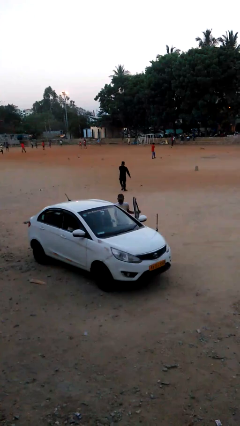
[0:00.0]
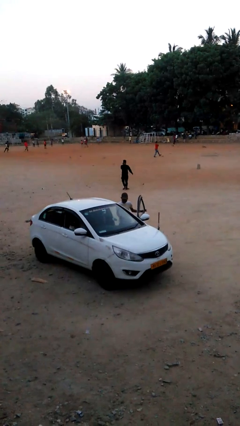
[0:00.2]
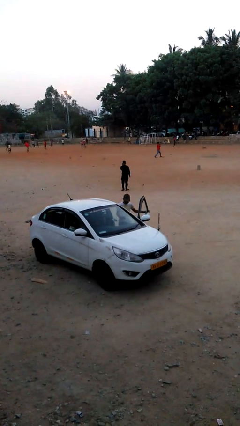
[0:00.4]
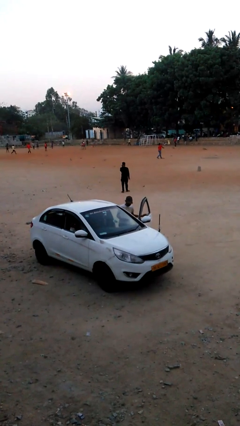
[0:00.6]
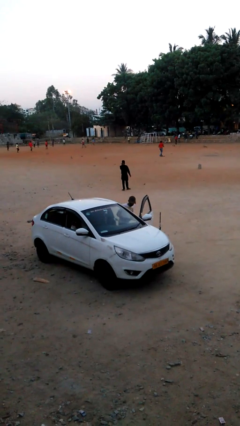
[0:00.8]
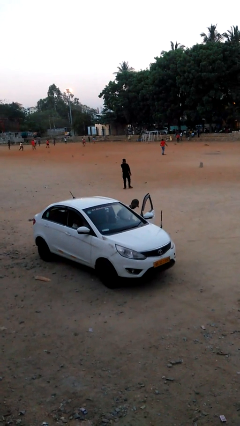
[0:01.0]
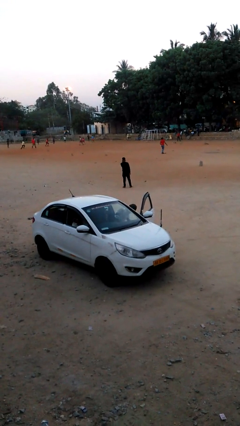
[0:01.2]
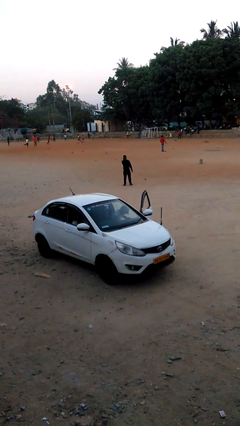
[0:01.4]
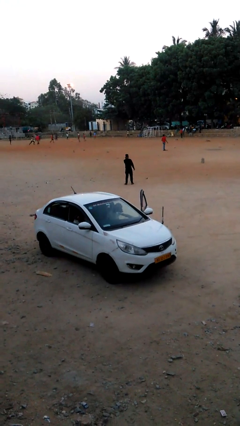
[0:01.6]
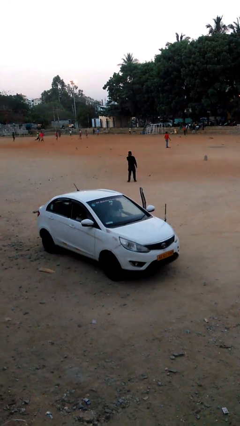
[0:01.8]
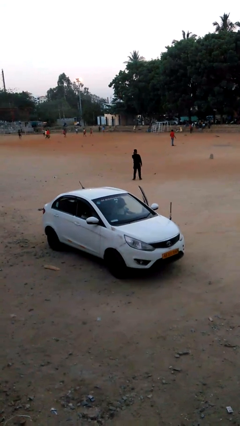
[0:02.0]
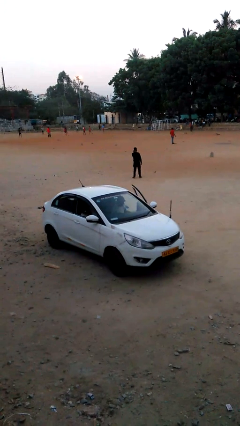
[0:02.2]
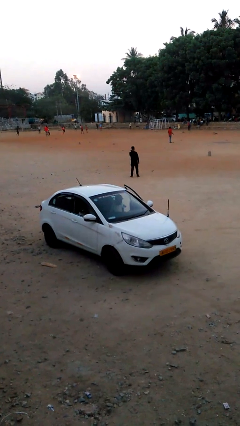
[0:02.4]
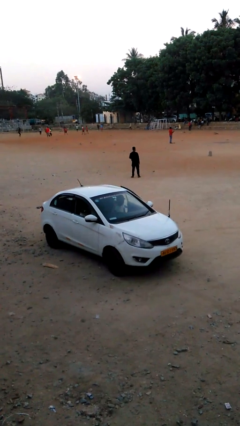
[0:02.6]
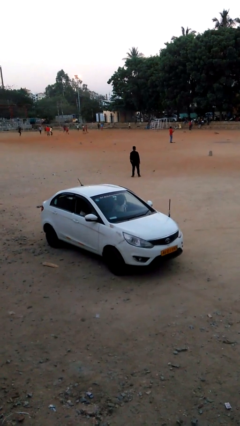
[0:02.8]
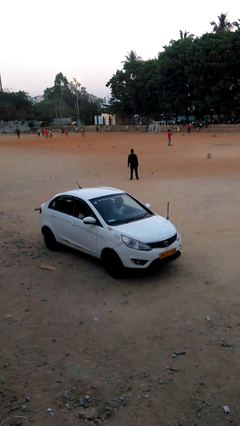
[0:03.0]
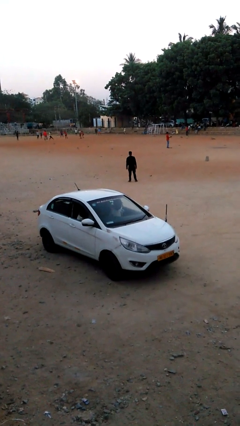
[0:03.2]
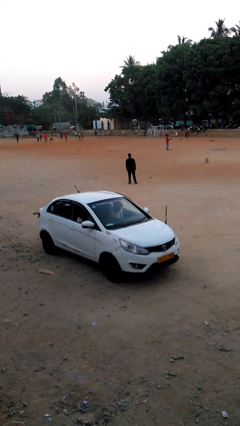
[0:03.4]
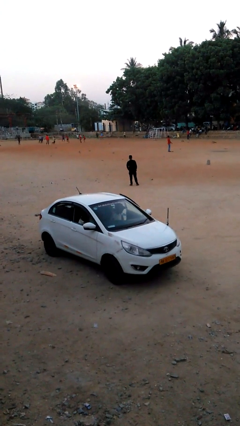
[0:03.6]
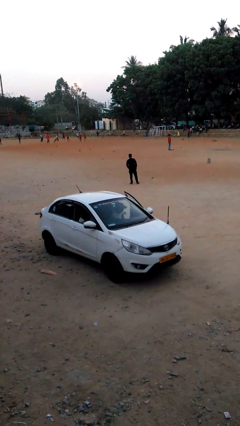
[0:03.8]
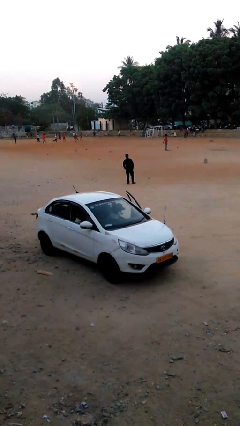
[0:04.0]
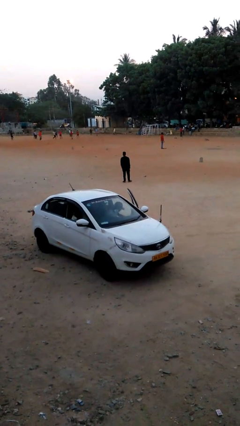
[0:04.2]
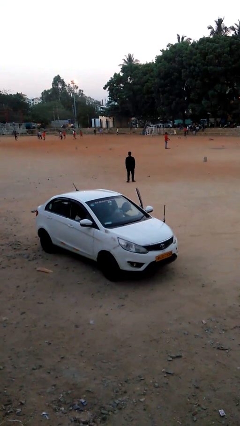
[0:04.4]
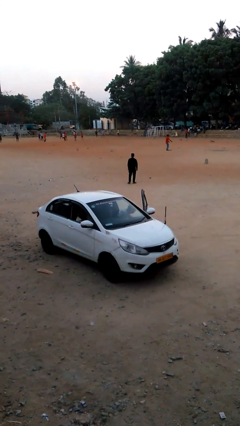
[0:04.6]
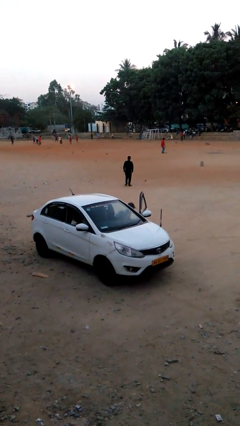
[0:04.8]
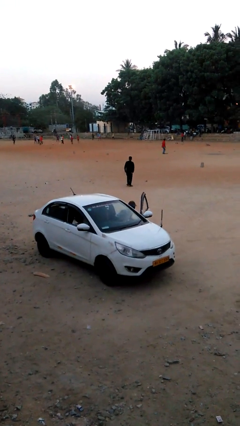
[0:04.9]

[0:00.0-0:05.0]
person enters car

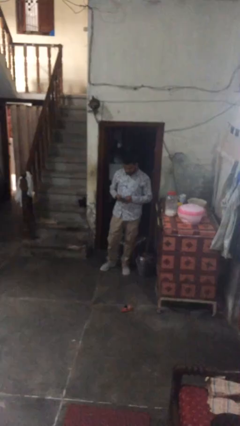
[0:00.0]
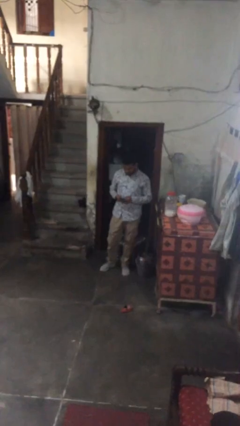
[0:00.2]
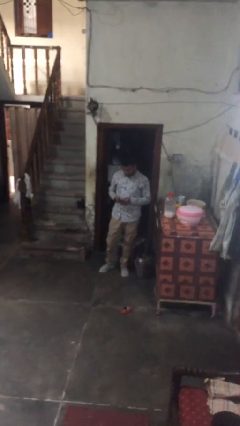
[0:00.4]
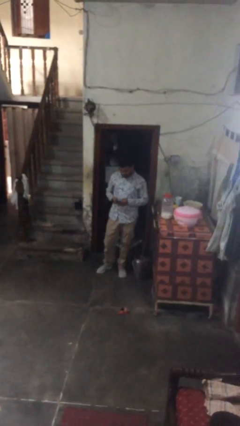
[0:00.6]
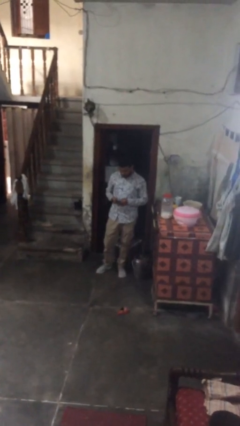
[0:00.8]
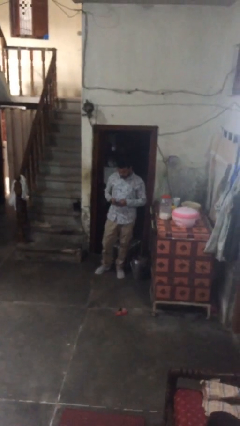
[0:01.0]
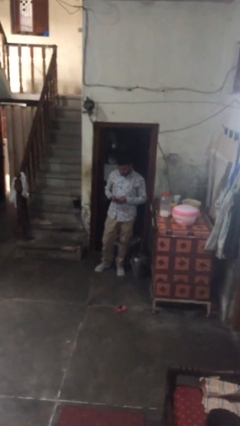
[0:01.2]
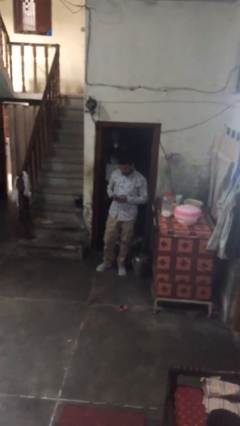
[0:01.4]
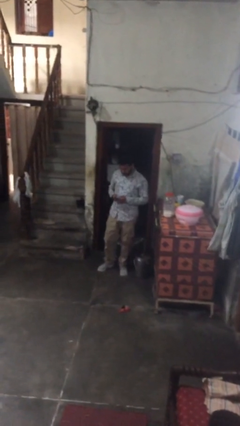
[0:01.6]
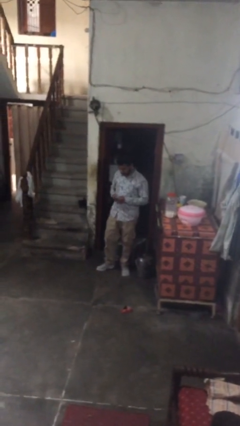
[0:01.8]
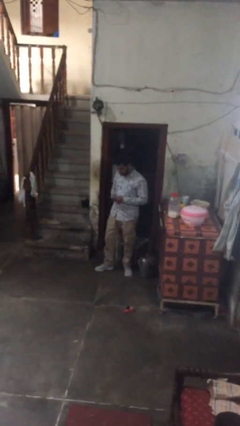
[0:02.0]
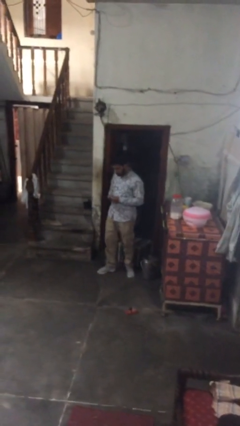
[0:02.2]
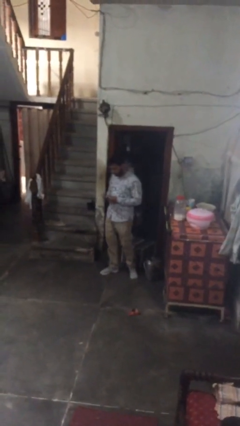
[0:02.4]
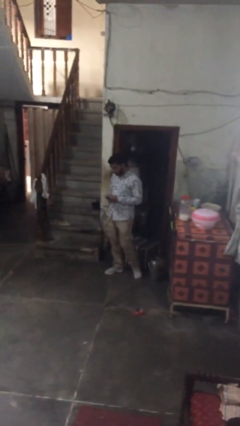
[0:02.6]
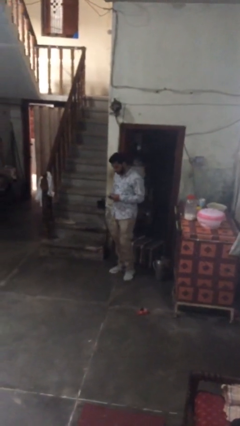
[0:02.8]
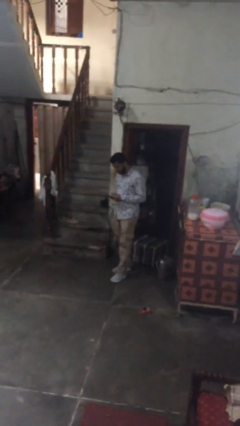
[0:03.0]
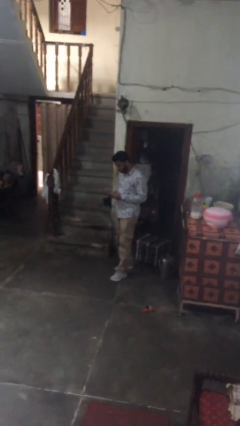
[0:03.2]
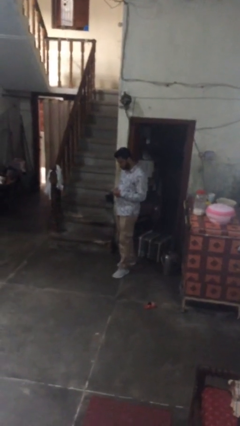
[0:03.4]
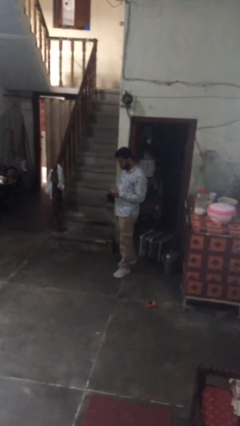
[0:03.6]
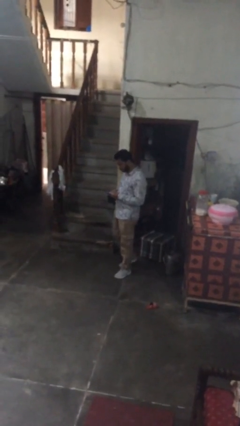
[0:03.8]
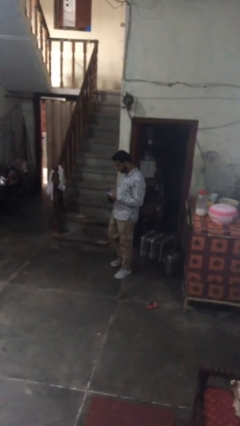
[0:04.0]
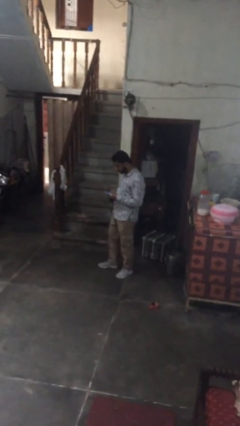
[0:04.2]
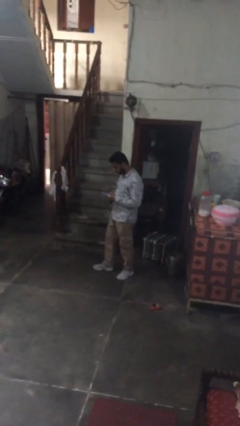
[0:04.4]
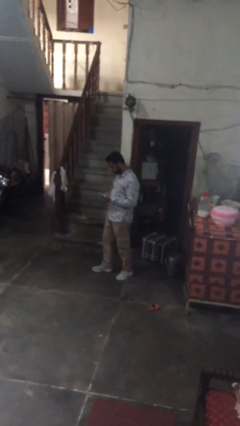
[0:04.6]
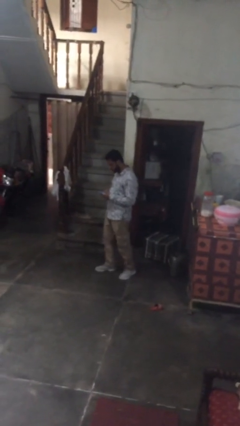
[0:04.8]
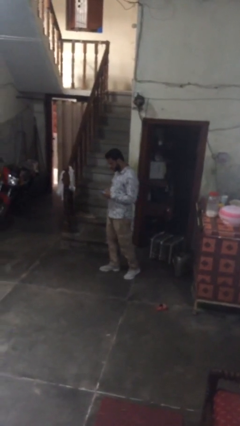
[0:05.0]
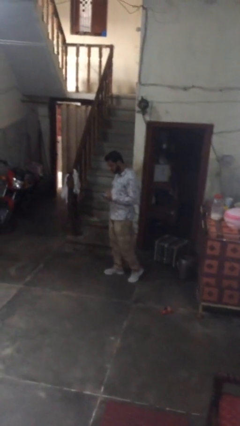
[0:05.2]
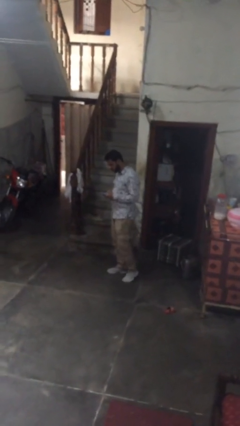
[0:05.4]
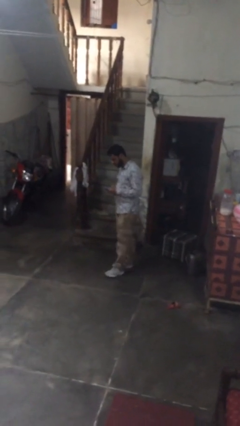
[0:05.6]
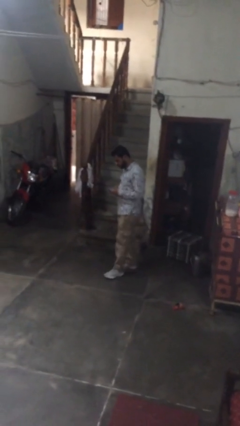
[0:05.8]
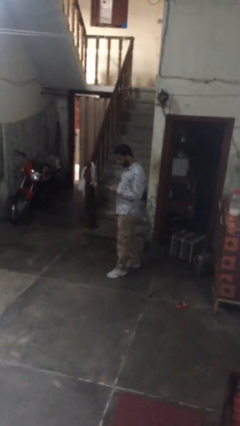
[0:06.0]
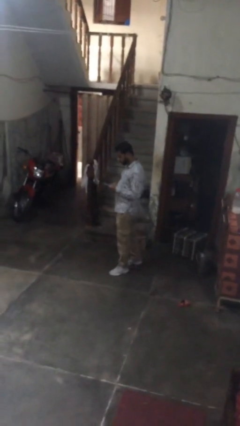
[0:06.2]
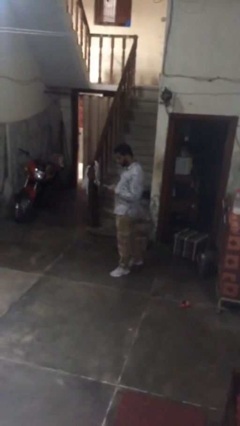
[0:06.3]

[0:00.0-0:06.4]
person texts on phone

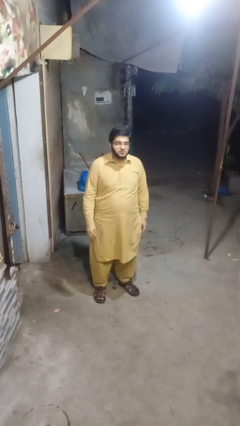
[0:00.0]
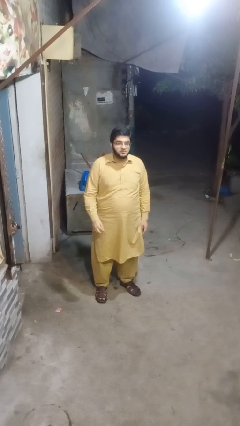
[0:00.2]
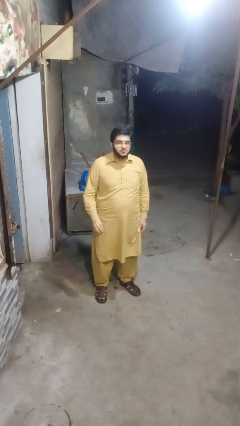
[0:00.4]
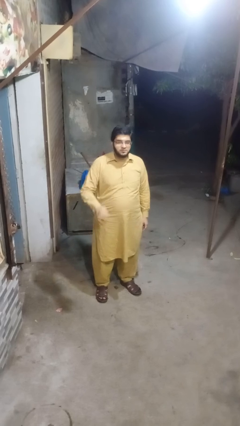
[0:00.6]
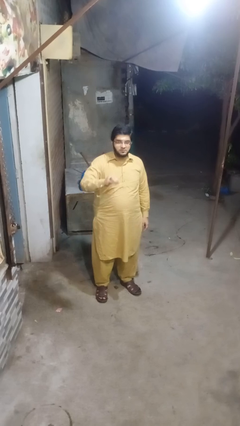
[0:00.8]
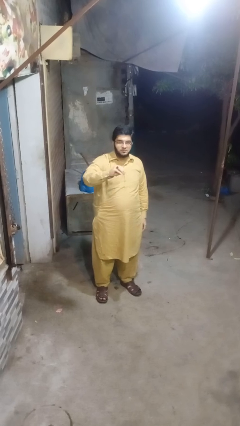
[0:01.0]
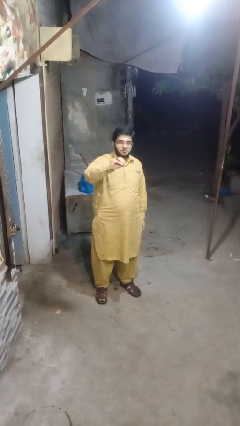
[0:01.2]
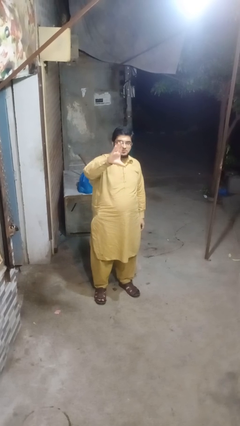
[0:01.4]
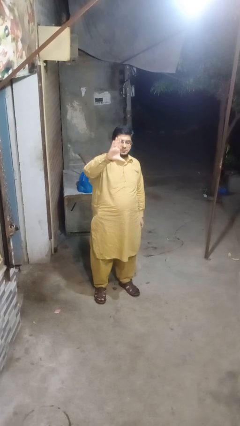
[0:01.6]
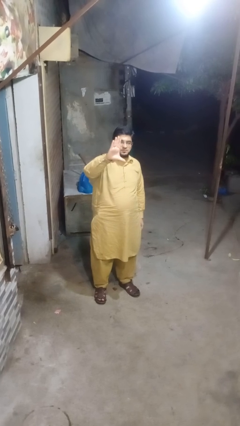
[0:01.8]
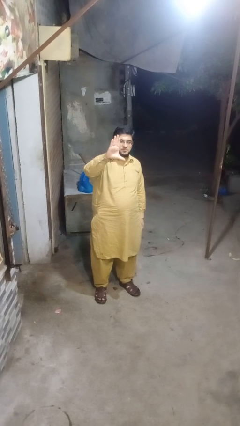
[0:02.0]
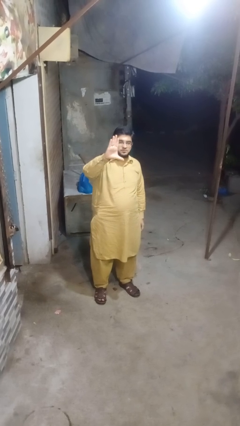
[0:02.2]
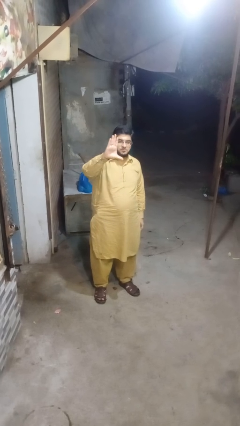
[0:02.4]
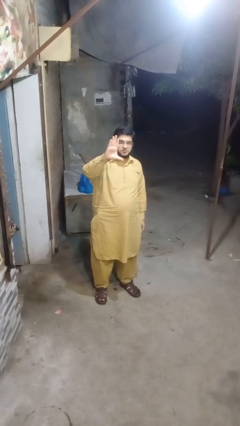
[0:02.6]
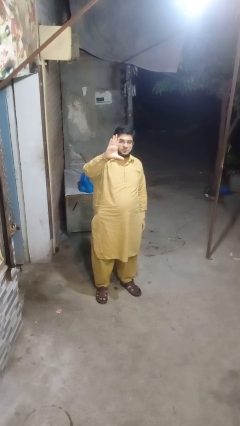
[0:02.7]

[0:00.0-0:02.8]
person gestures zoom in

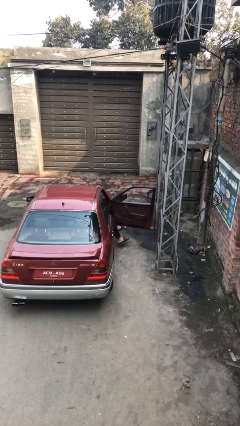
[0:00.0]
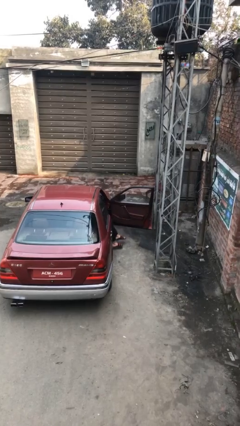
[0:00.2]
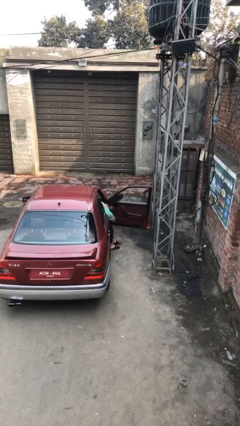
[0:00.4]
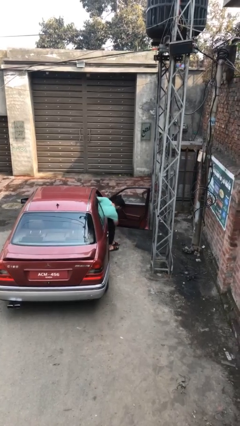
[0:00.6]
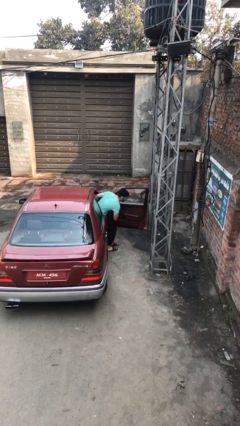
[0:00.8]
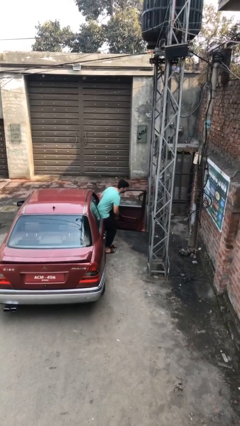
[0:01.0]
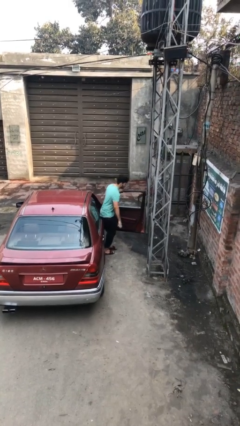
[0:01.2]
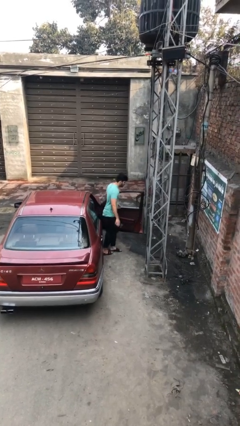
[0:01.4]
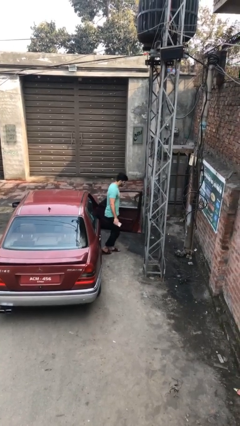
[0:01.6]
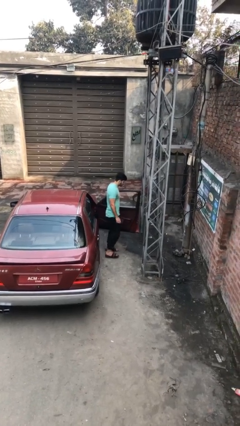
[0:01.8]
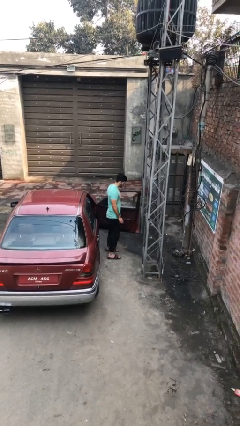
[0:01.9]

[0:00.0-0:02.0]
person exits car

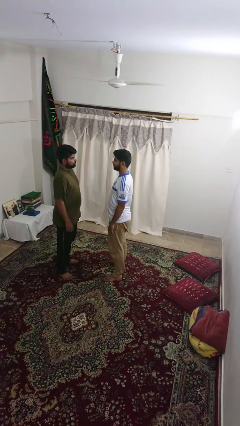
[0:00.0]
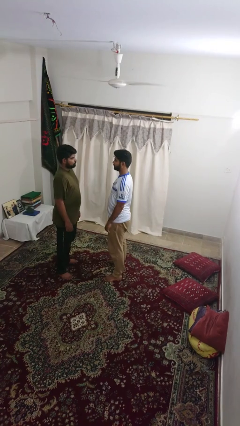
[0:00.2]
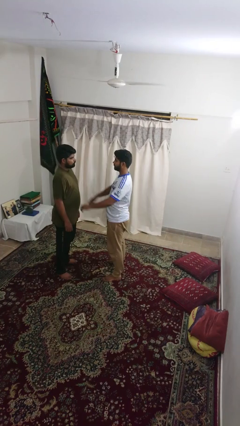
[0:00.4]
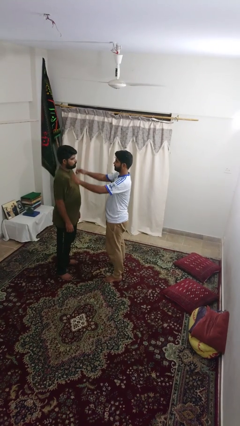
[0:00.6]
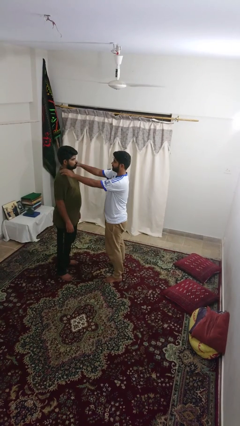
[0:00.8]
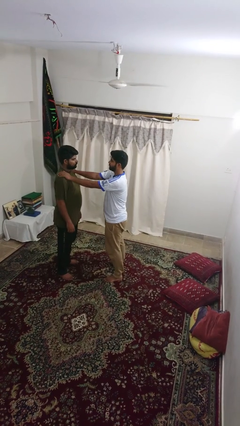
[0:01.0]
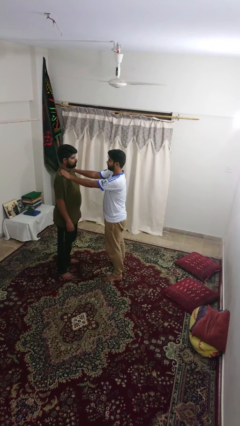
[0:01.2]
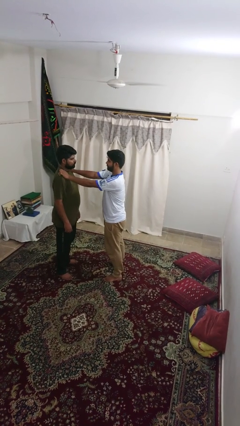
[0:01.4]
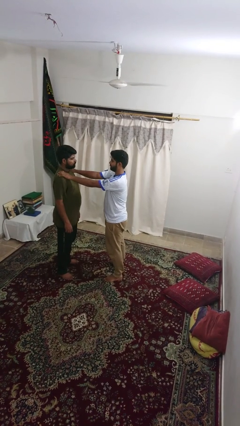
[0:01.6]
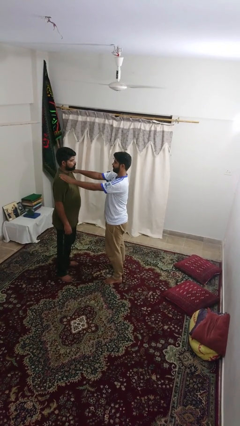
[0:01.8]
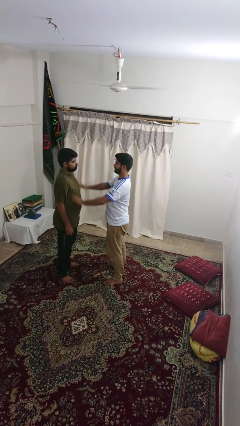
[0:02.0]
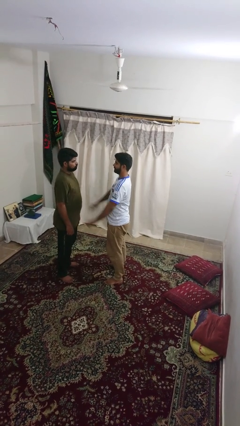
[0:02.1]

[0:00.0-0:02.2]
person pounds shoulders of person
